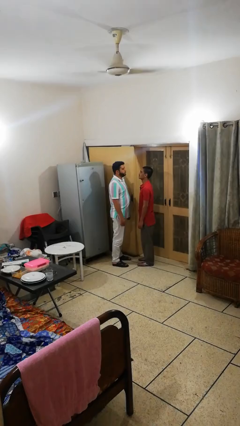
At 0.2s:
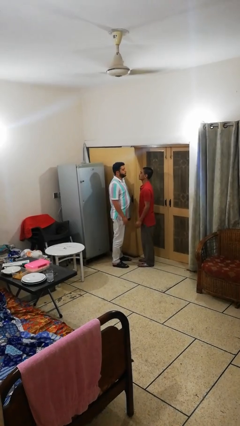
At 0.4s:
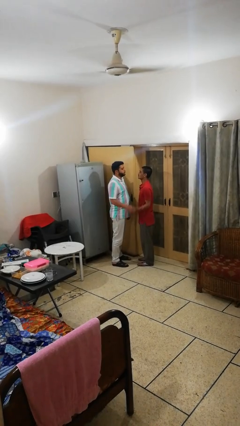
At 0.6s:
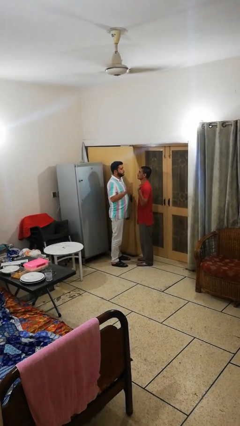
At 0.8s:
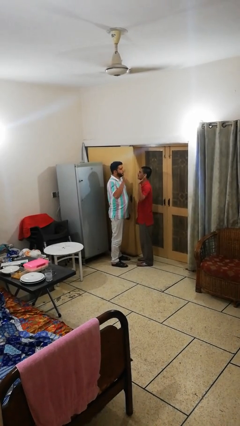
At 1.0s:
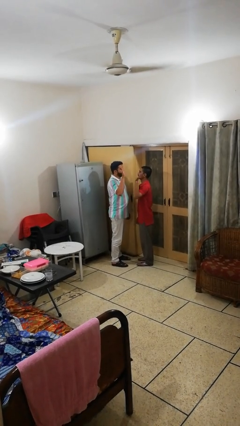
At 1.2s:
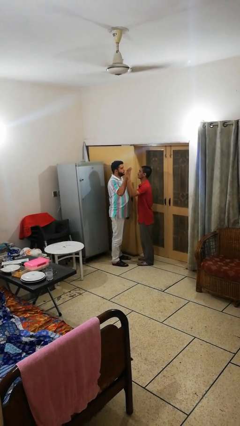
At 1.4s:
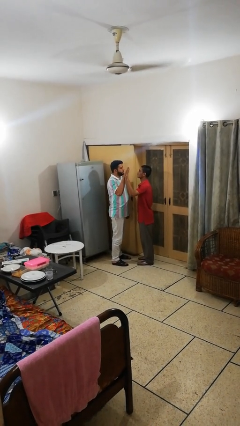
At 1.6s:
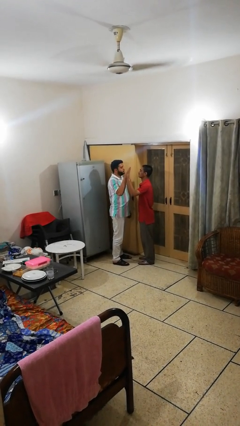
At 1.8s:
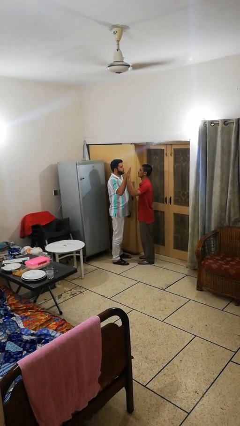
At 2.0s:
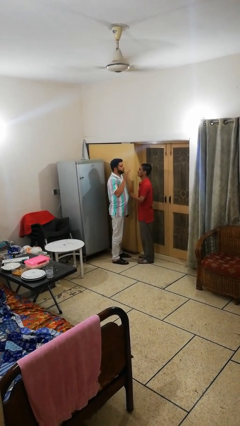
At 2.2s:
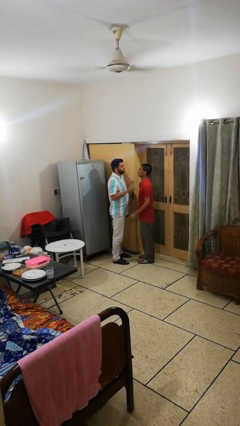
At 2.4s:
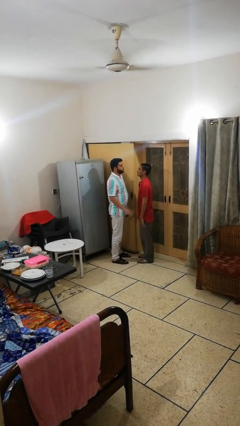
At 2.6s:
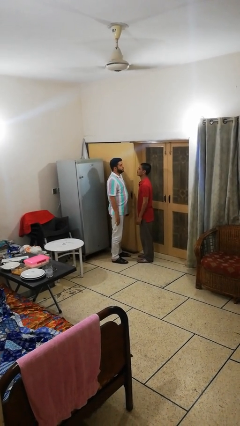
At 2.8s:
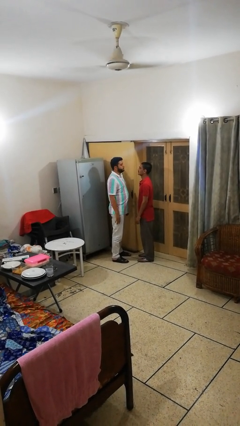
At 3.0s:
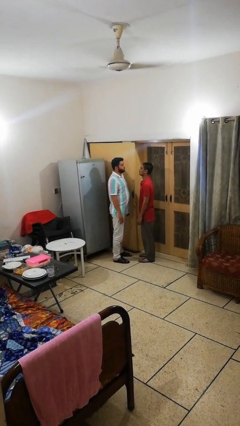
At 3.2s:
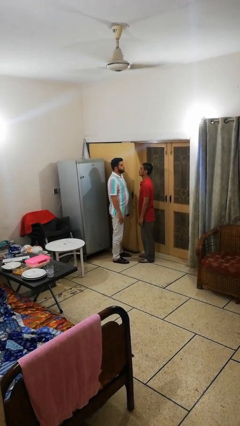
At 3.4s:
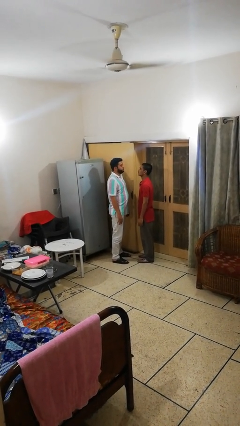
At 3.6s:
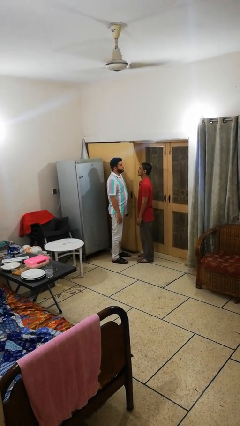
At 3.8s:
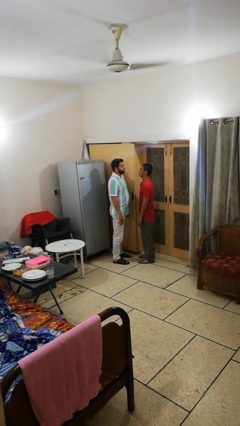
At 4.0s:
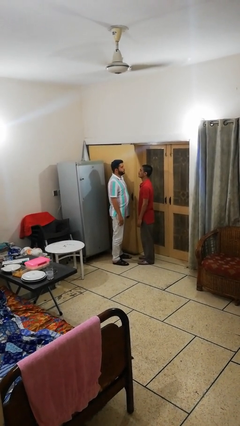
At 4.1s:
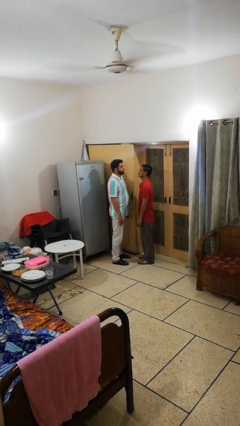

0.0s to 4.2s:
person highfives hand

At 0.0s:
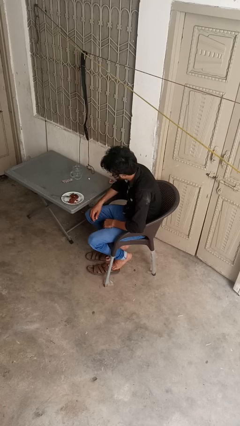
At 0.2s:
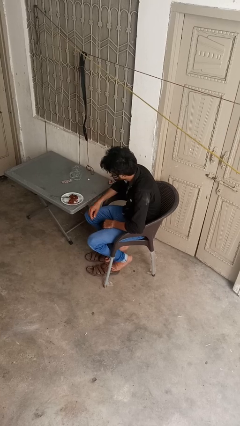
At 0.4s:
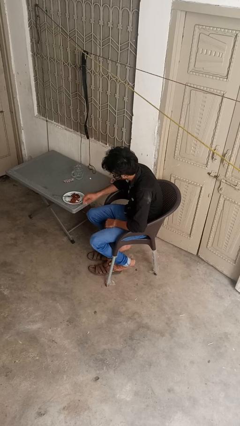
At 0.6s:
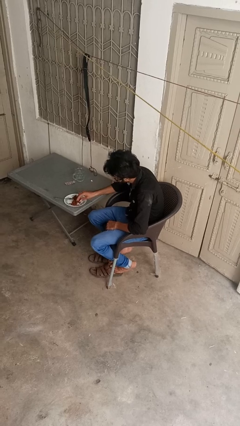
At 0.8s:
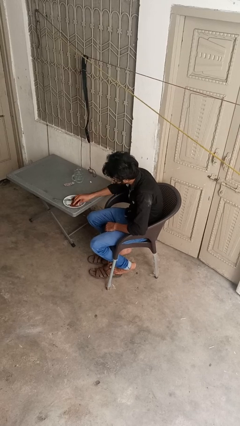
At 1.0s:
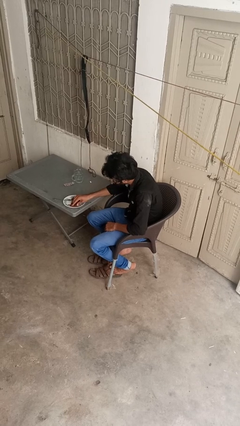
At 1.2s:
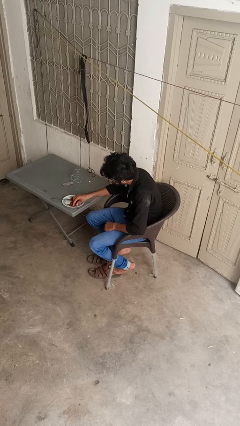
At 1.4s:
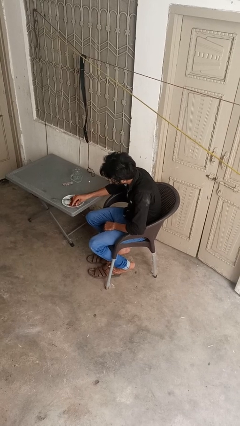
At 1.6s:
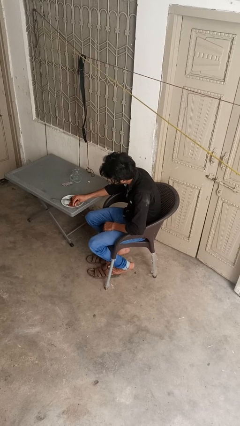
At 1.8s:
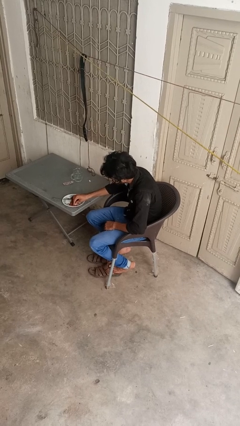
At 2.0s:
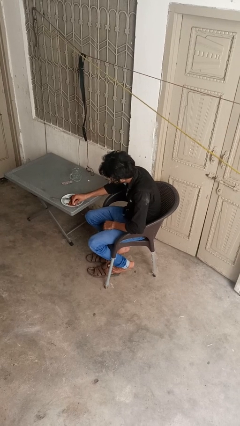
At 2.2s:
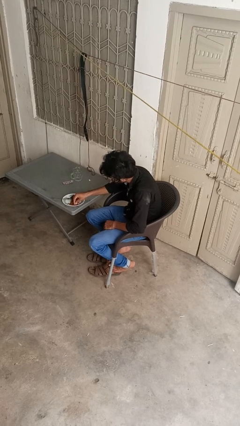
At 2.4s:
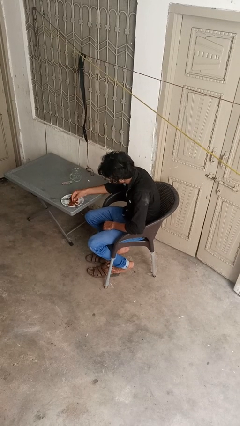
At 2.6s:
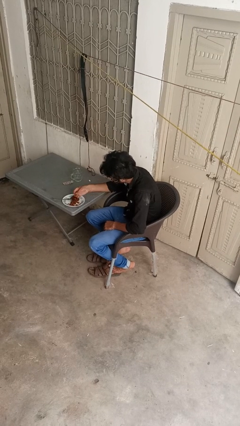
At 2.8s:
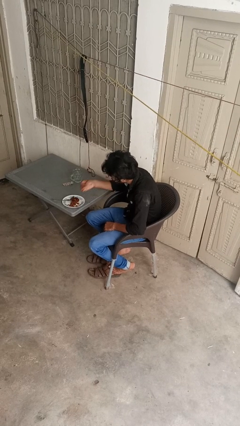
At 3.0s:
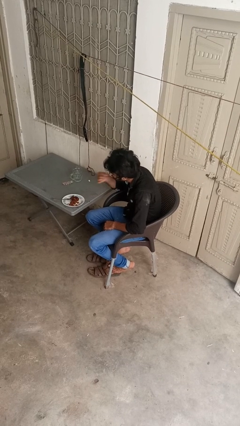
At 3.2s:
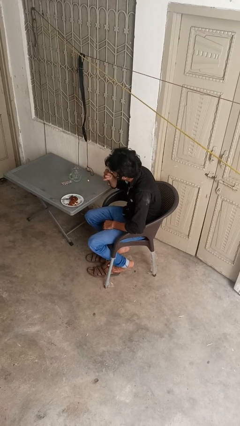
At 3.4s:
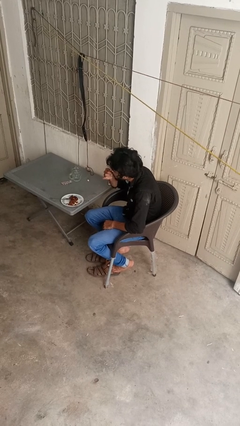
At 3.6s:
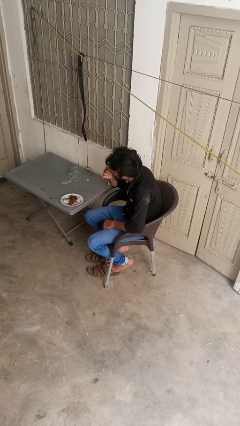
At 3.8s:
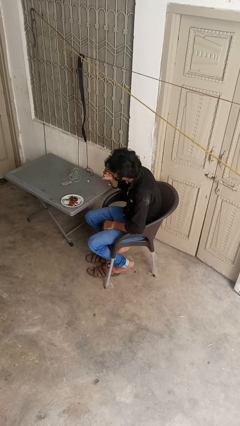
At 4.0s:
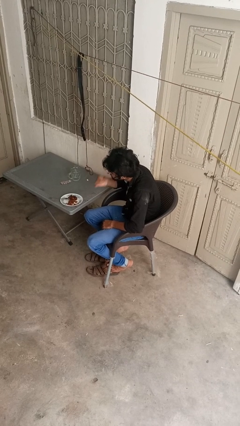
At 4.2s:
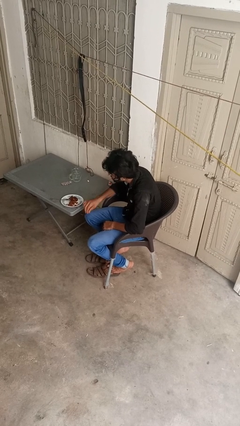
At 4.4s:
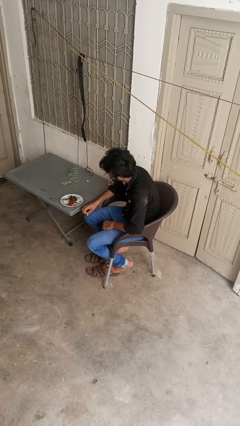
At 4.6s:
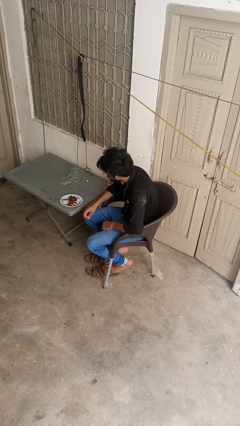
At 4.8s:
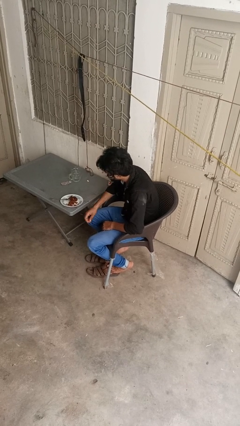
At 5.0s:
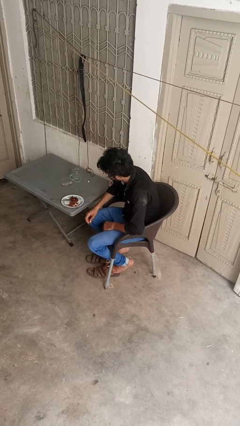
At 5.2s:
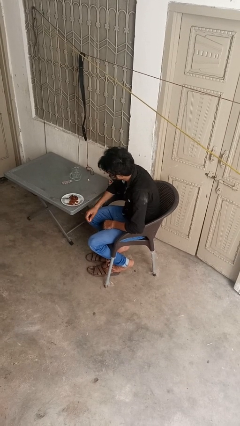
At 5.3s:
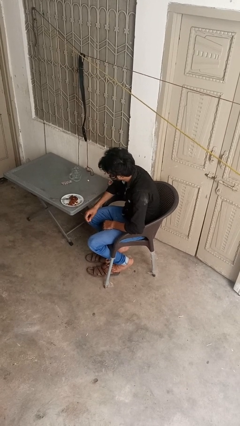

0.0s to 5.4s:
person eats with hands

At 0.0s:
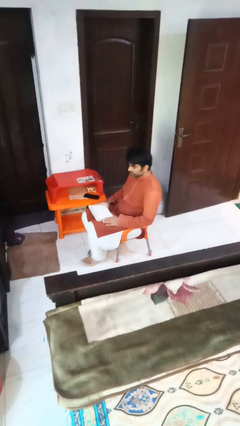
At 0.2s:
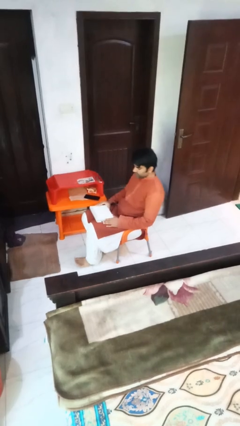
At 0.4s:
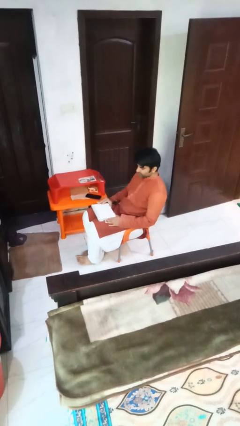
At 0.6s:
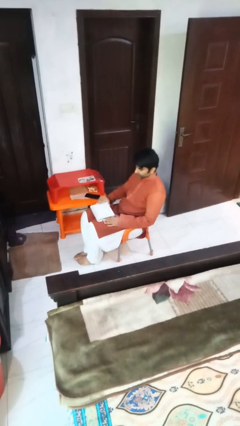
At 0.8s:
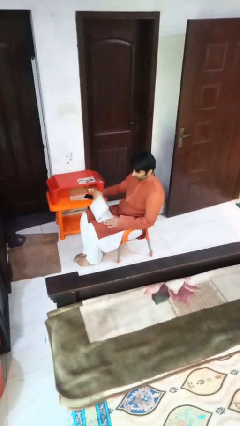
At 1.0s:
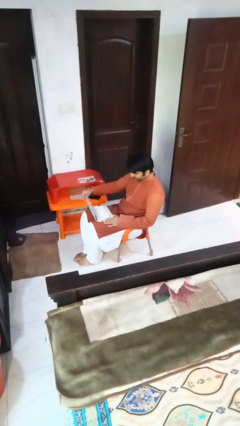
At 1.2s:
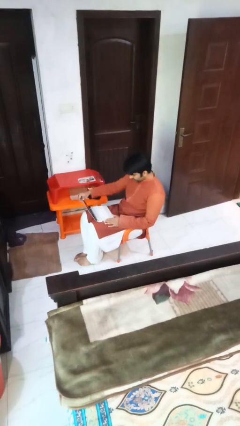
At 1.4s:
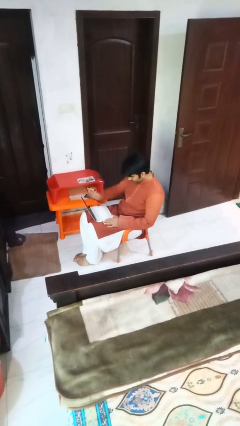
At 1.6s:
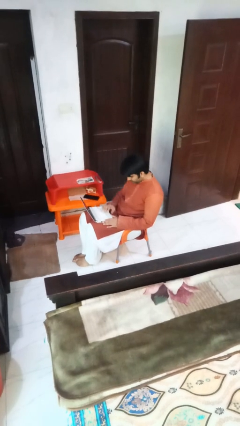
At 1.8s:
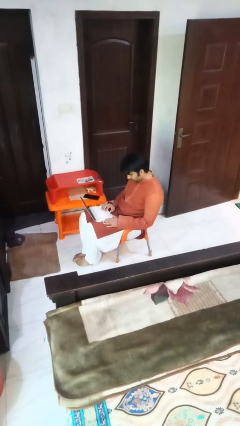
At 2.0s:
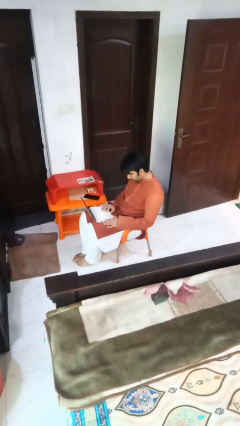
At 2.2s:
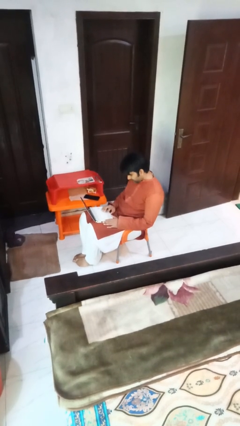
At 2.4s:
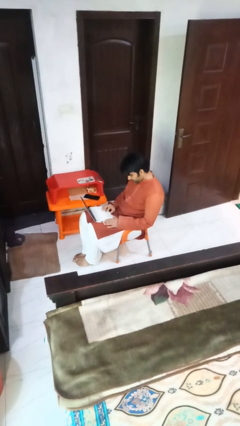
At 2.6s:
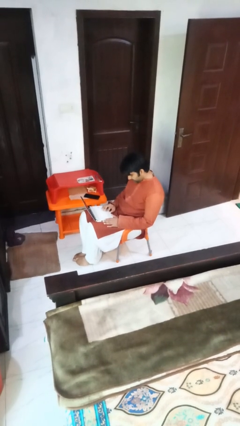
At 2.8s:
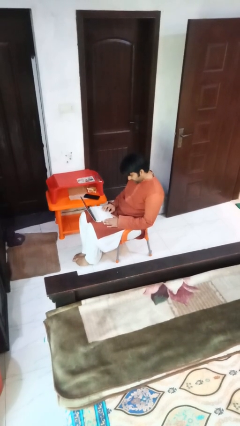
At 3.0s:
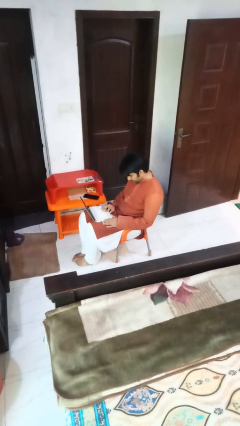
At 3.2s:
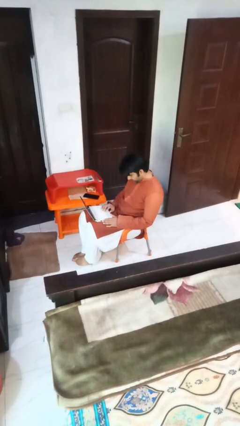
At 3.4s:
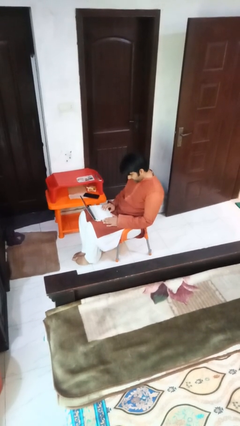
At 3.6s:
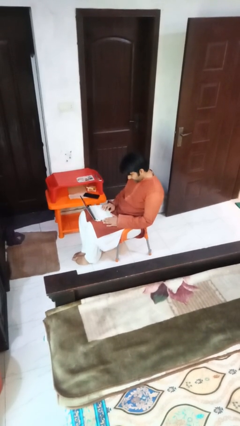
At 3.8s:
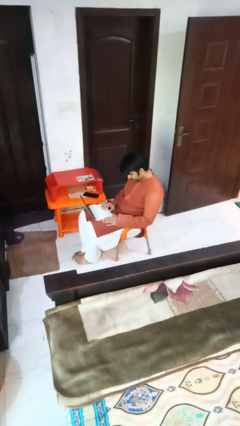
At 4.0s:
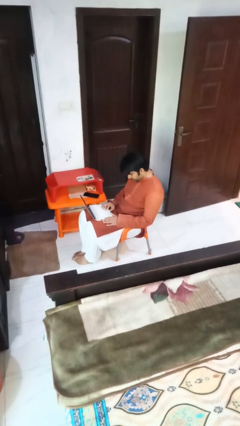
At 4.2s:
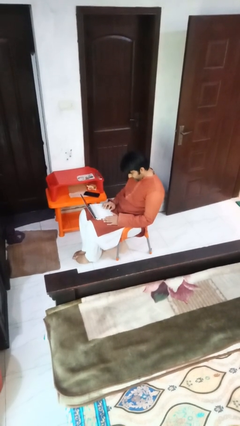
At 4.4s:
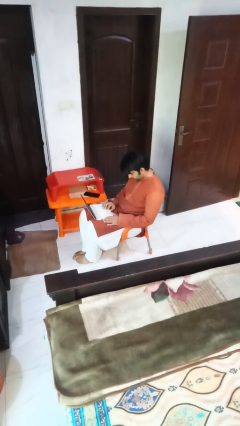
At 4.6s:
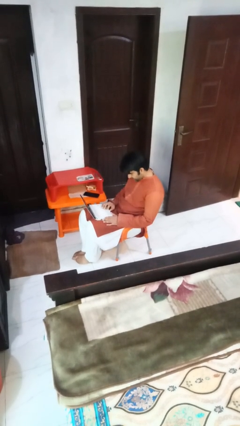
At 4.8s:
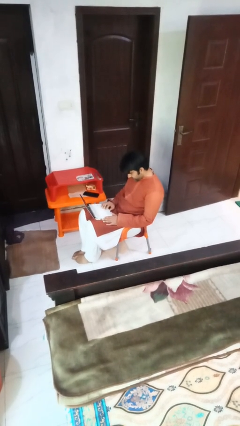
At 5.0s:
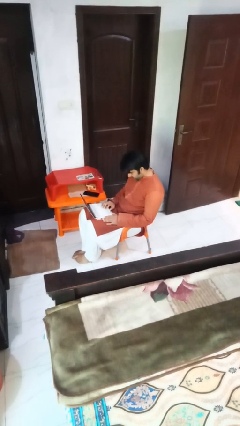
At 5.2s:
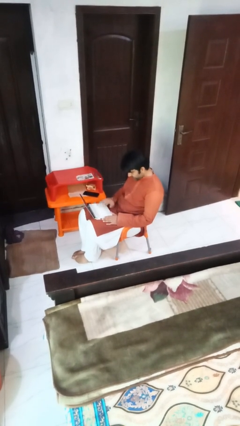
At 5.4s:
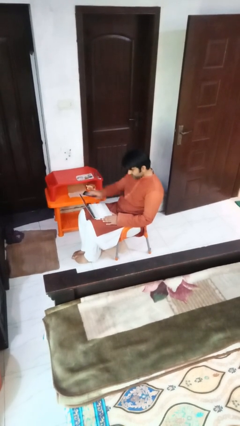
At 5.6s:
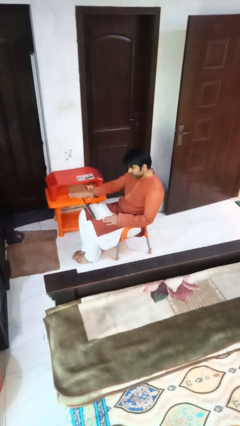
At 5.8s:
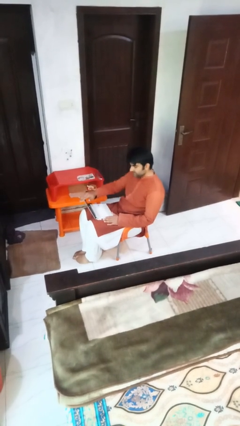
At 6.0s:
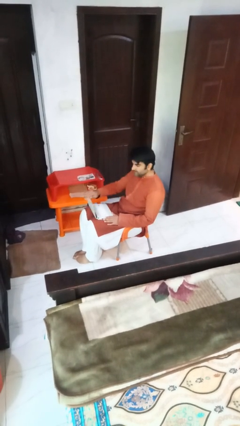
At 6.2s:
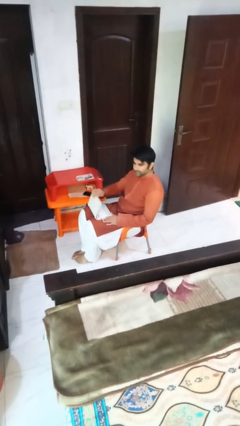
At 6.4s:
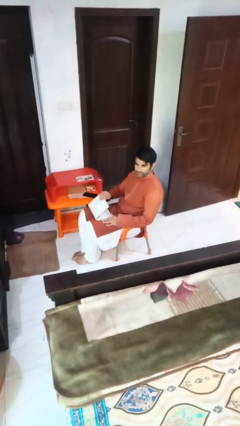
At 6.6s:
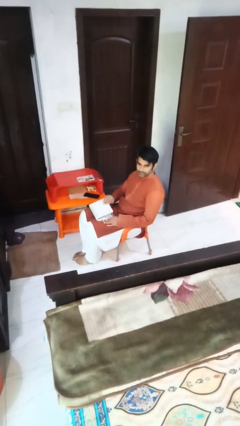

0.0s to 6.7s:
person interacts with laptop

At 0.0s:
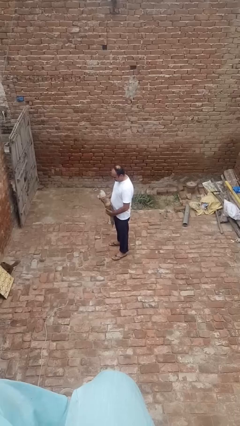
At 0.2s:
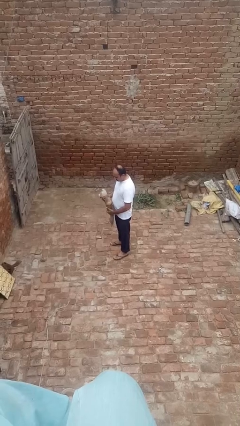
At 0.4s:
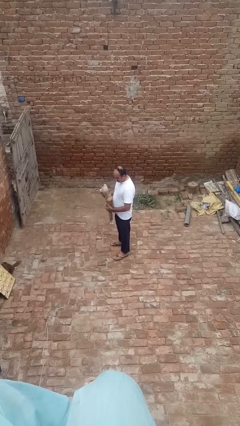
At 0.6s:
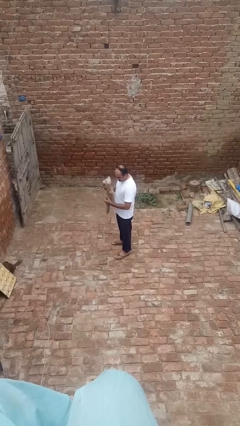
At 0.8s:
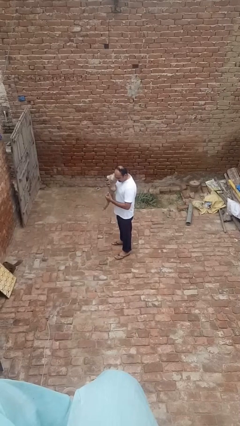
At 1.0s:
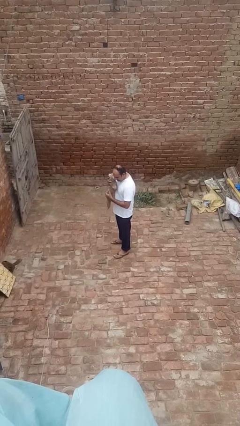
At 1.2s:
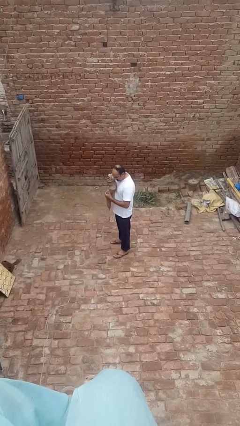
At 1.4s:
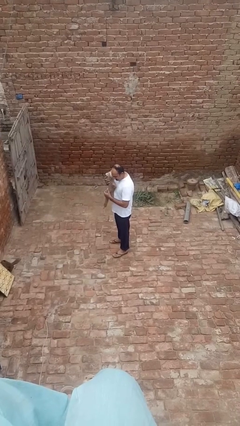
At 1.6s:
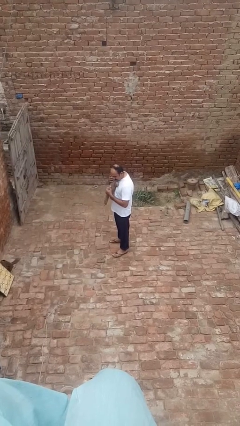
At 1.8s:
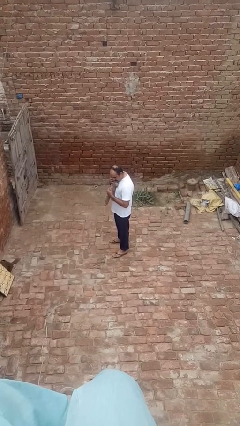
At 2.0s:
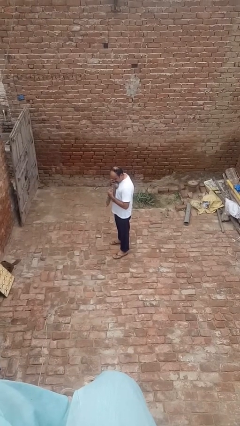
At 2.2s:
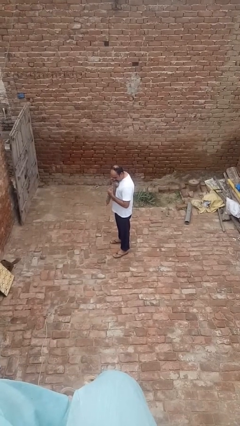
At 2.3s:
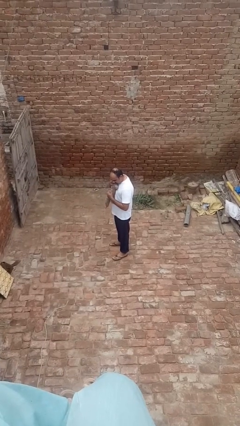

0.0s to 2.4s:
person hugs stuffed animal
